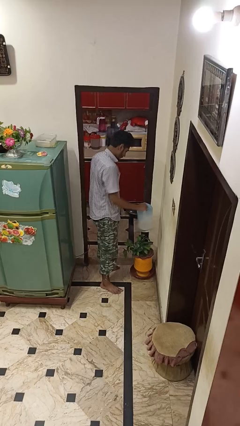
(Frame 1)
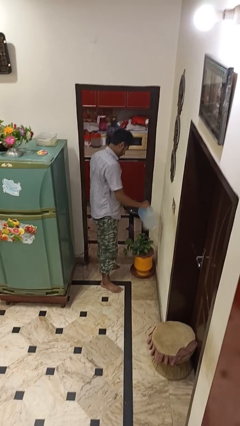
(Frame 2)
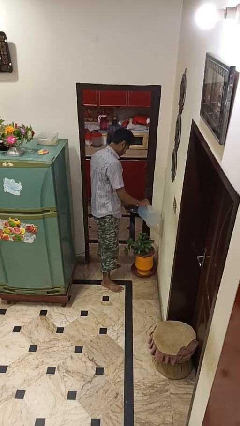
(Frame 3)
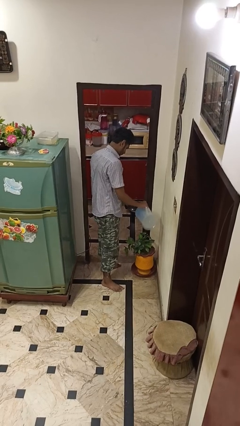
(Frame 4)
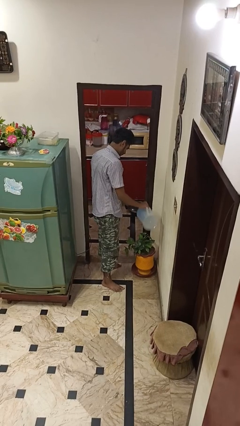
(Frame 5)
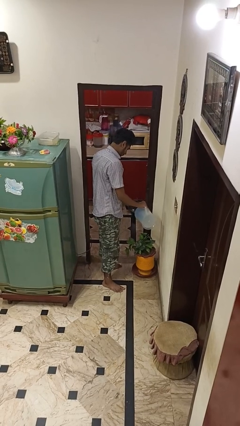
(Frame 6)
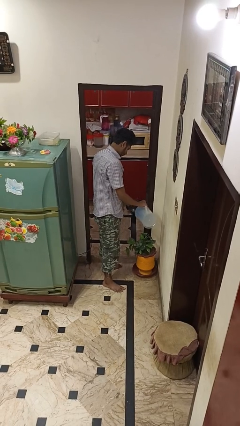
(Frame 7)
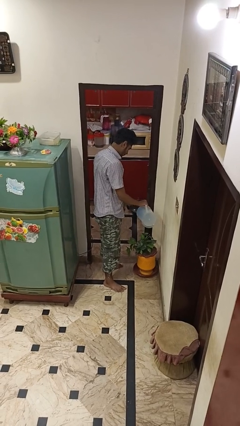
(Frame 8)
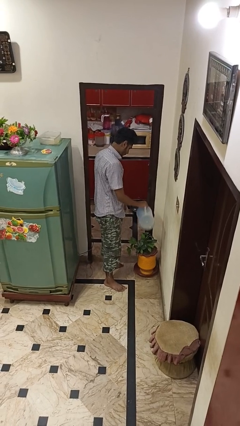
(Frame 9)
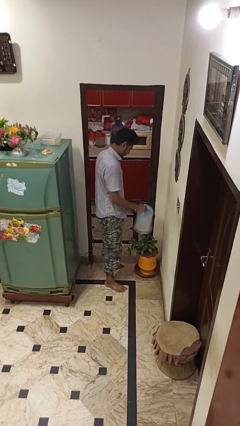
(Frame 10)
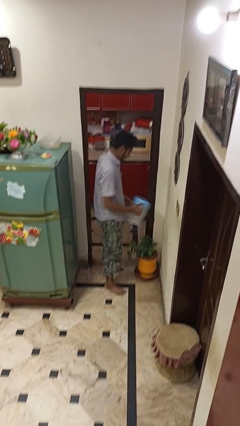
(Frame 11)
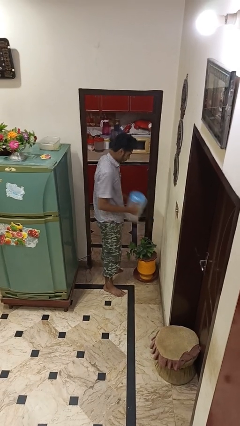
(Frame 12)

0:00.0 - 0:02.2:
person waters houseplant

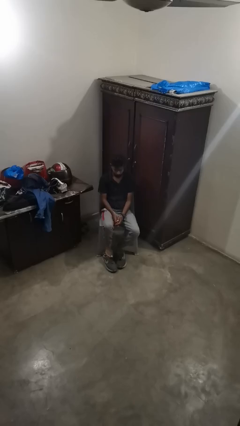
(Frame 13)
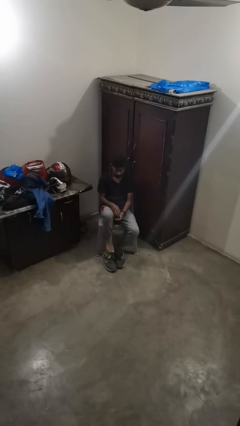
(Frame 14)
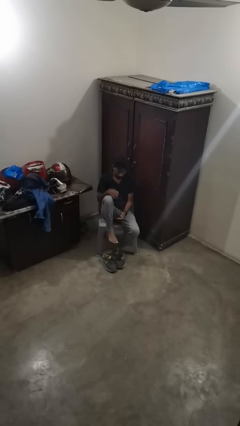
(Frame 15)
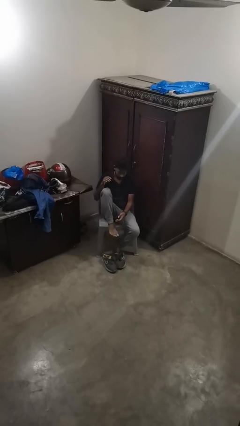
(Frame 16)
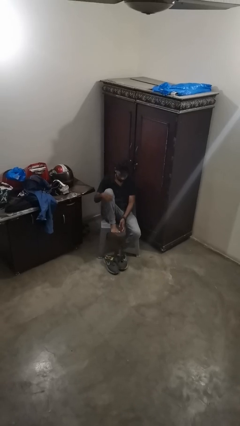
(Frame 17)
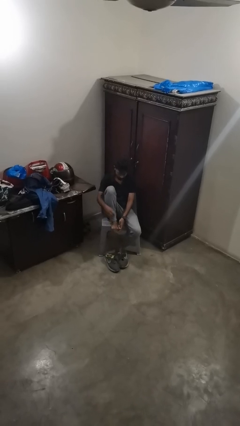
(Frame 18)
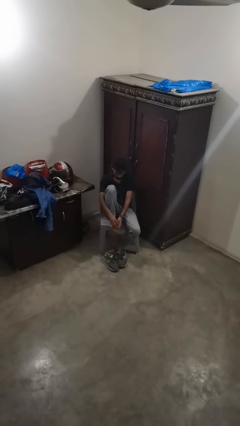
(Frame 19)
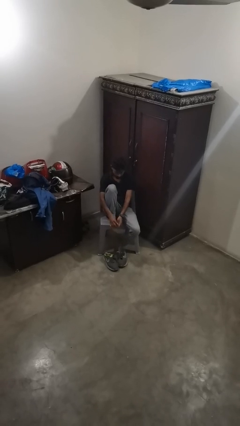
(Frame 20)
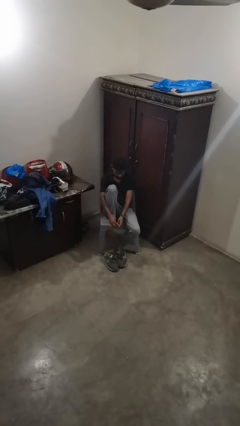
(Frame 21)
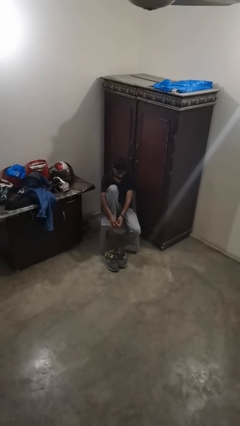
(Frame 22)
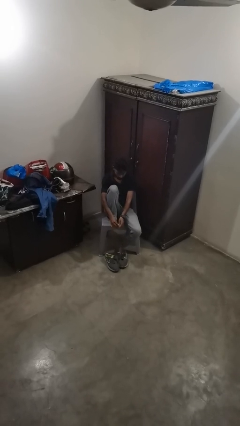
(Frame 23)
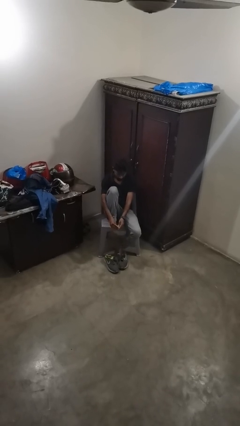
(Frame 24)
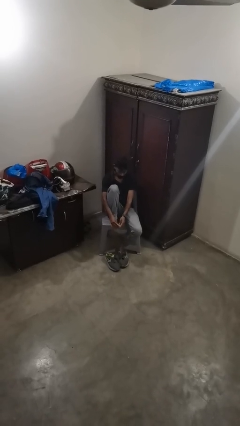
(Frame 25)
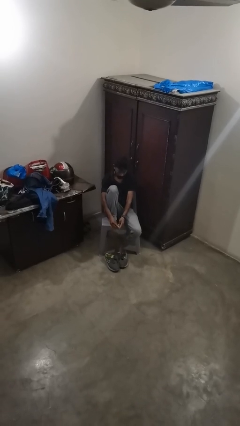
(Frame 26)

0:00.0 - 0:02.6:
person rubs foot

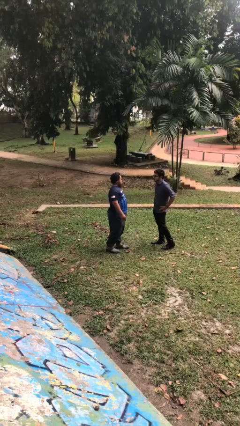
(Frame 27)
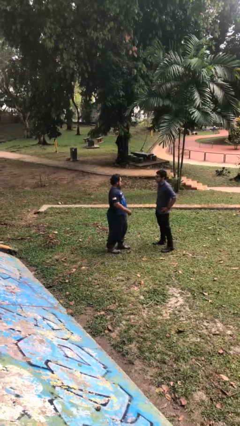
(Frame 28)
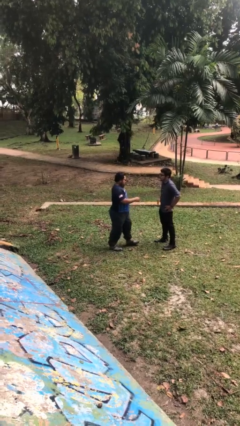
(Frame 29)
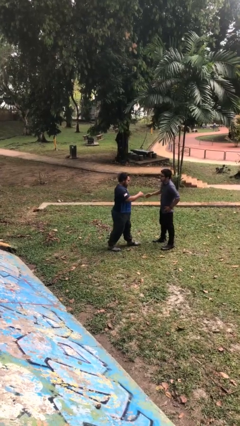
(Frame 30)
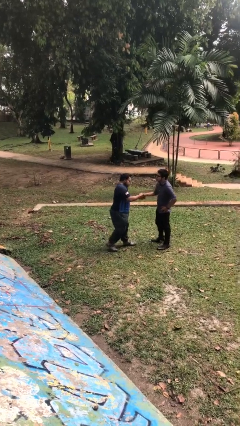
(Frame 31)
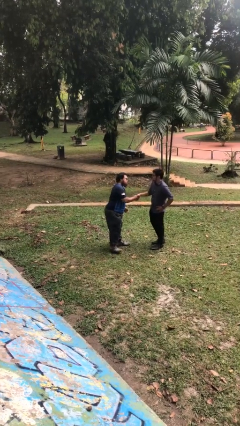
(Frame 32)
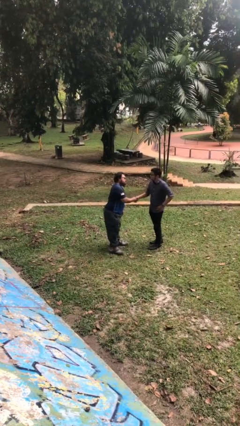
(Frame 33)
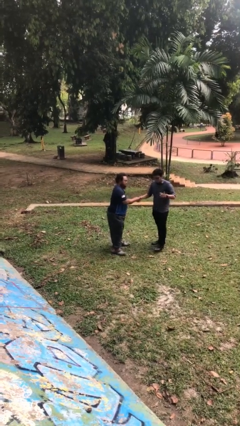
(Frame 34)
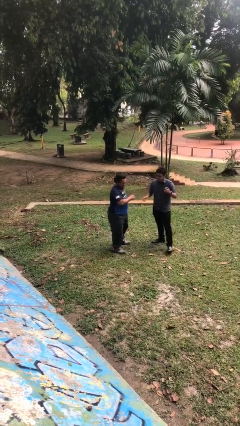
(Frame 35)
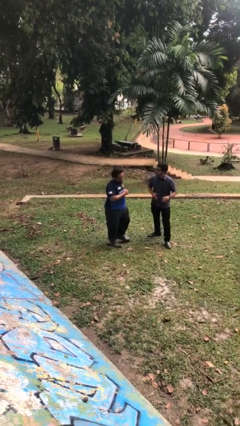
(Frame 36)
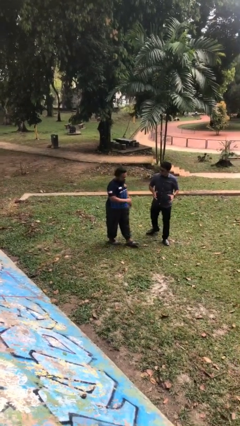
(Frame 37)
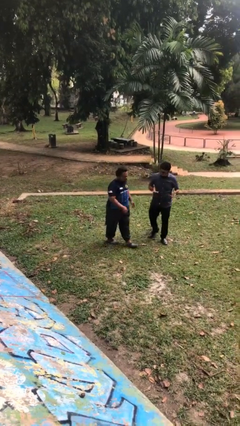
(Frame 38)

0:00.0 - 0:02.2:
person shakes hand

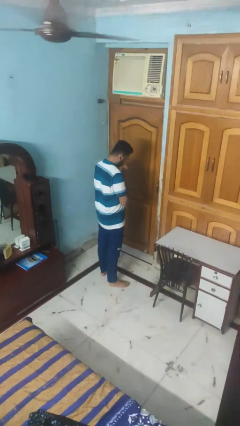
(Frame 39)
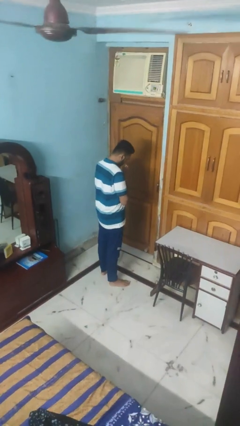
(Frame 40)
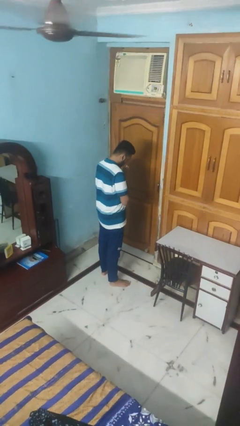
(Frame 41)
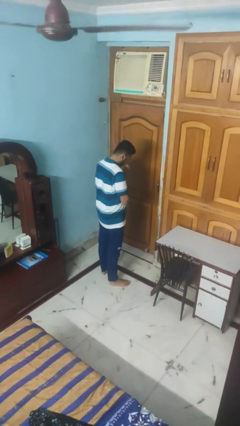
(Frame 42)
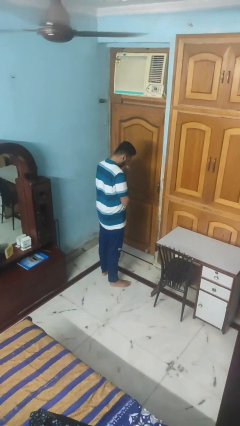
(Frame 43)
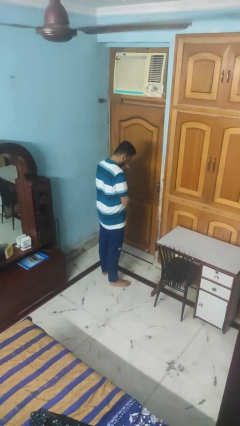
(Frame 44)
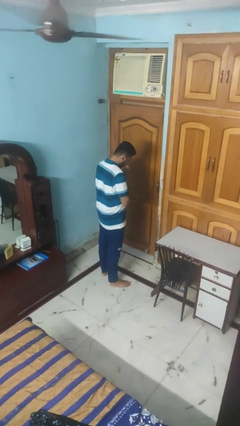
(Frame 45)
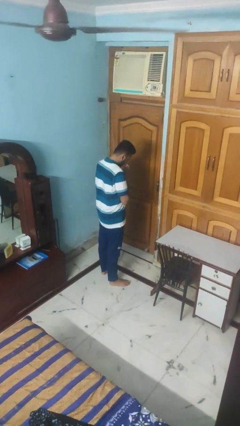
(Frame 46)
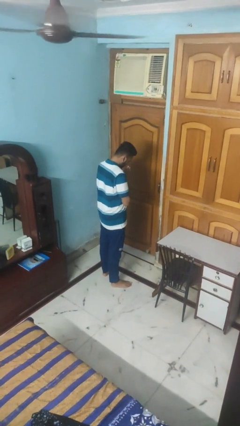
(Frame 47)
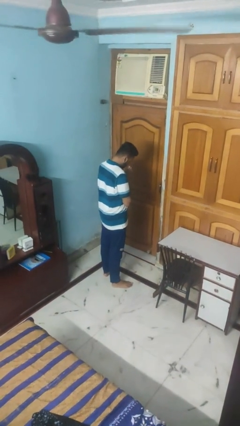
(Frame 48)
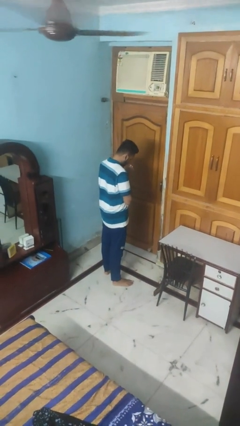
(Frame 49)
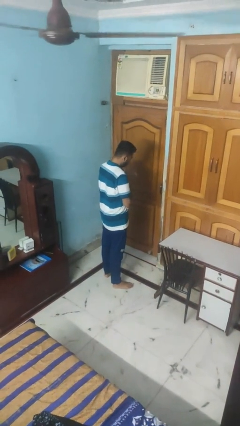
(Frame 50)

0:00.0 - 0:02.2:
person prays

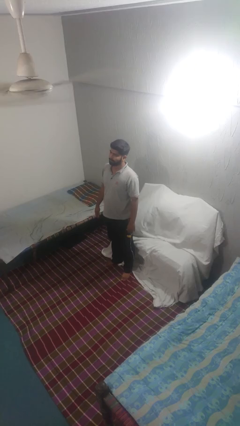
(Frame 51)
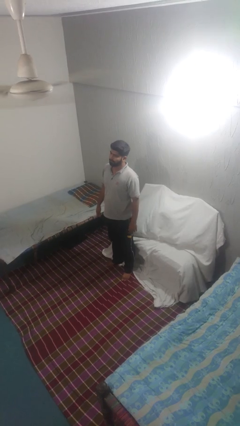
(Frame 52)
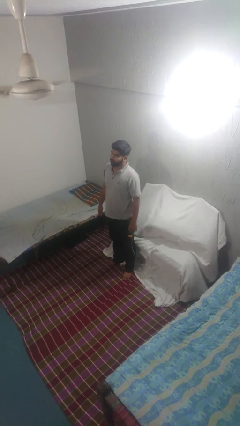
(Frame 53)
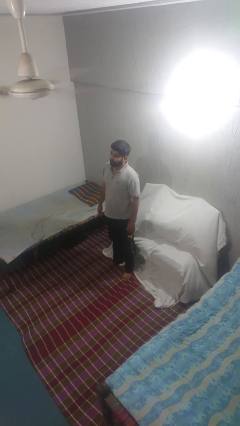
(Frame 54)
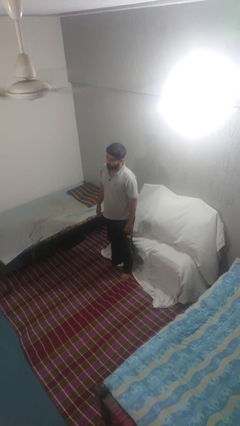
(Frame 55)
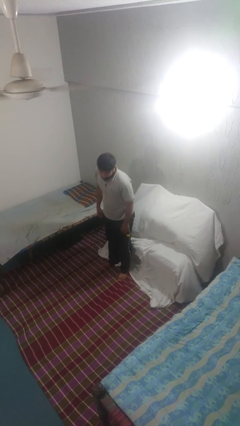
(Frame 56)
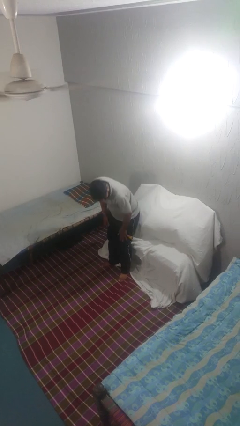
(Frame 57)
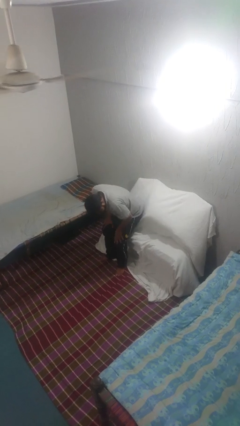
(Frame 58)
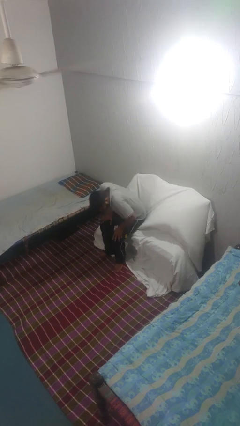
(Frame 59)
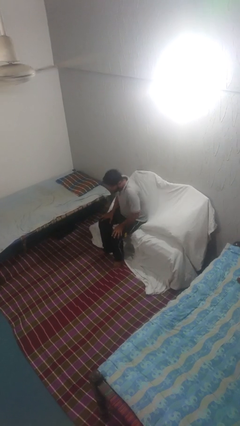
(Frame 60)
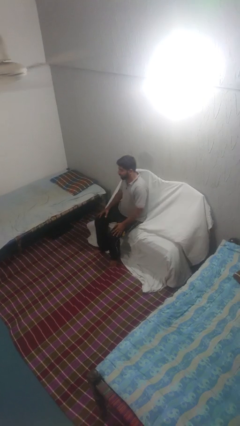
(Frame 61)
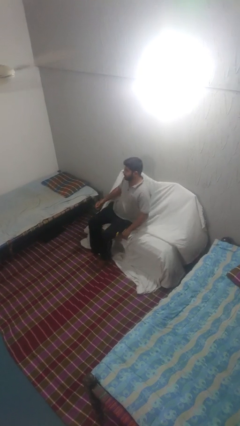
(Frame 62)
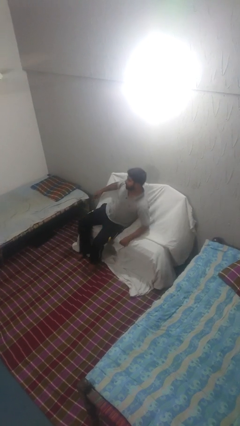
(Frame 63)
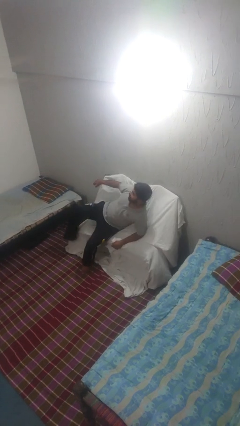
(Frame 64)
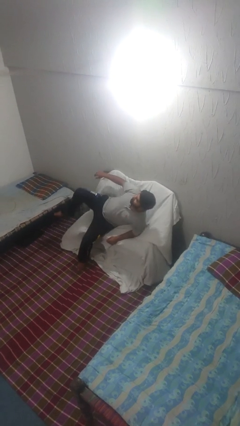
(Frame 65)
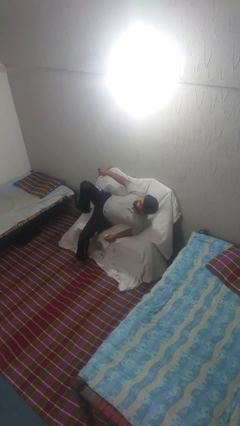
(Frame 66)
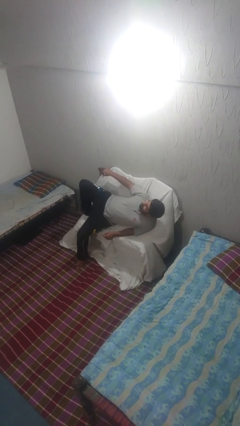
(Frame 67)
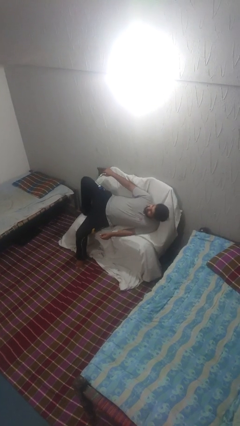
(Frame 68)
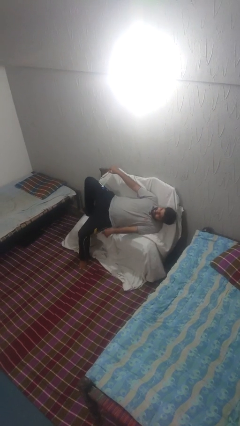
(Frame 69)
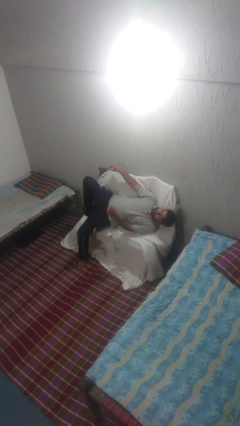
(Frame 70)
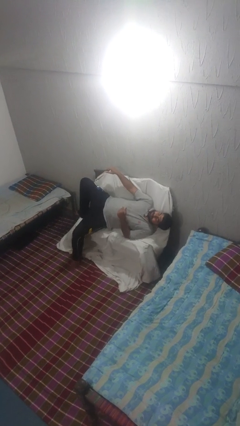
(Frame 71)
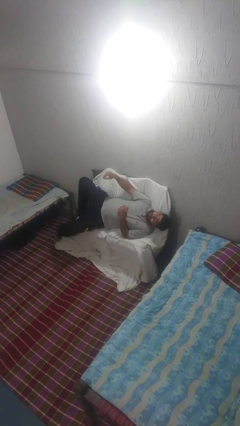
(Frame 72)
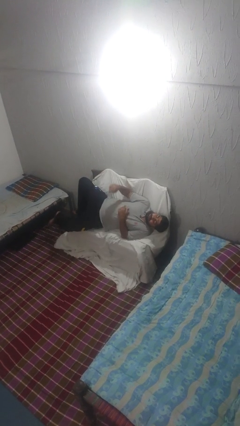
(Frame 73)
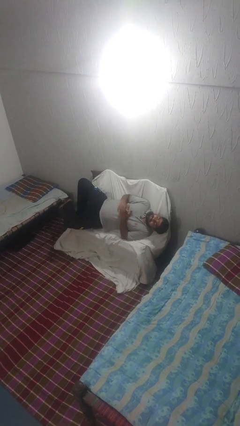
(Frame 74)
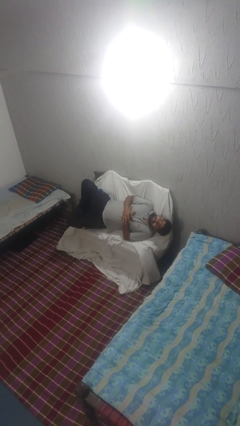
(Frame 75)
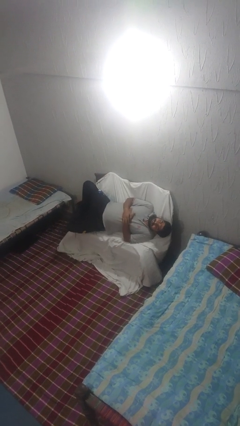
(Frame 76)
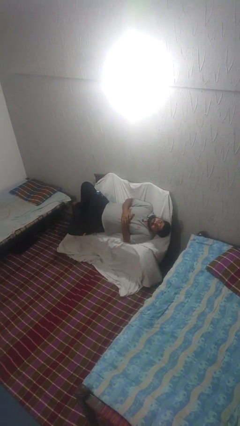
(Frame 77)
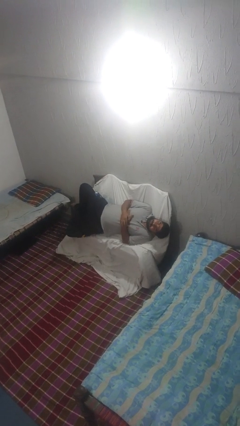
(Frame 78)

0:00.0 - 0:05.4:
person lies down on couch

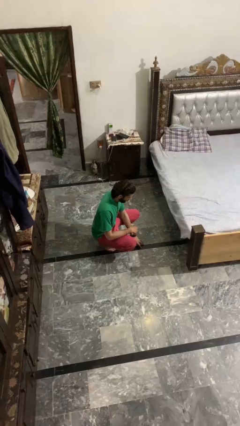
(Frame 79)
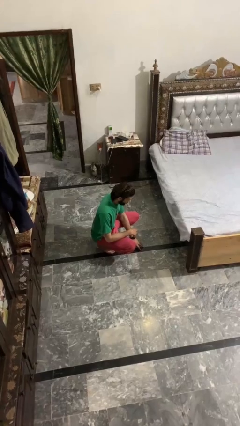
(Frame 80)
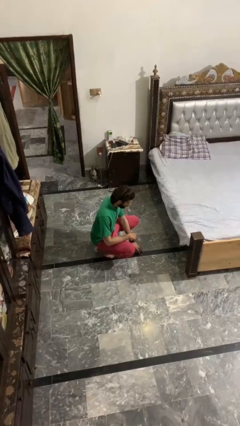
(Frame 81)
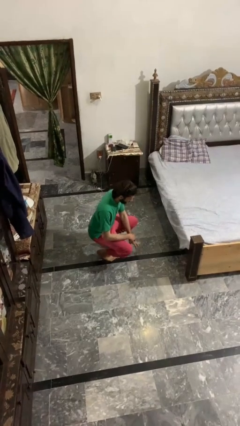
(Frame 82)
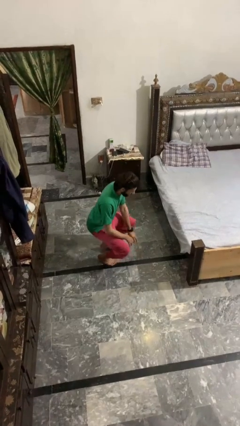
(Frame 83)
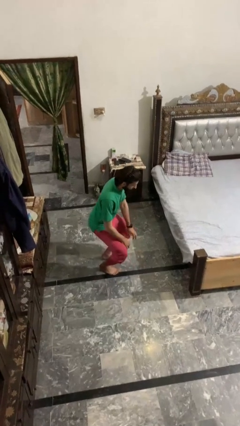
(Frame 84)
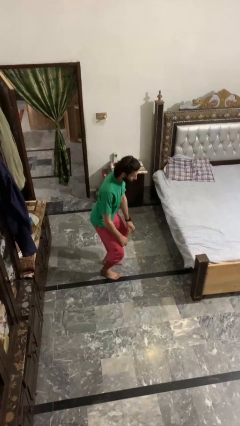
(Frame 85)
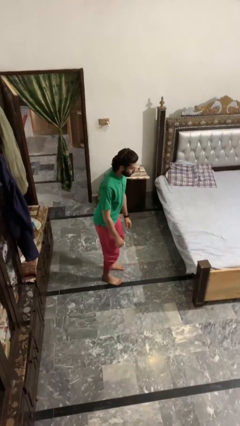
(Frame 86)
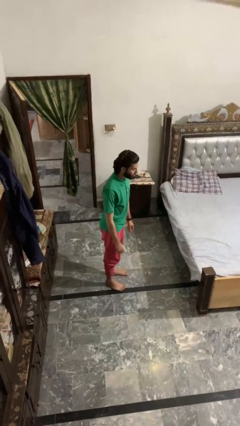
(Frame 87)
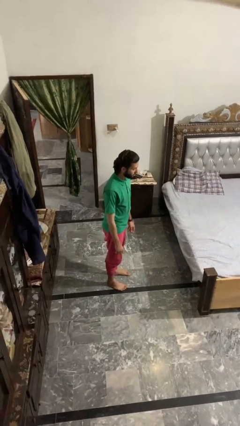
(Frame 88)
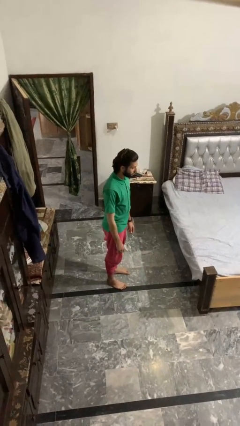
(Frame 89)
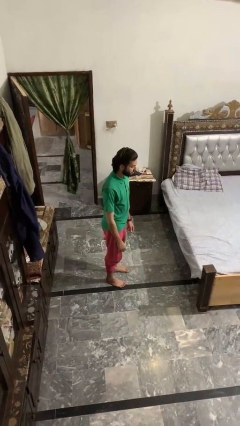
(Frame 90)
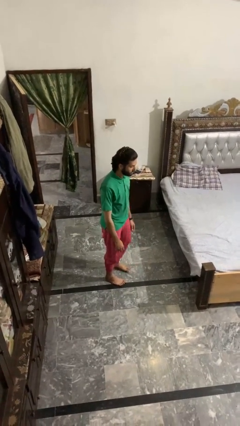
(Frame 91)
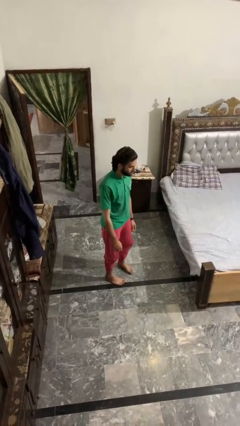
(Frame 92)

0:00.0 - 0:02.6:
person stands up

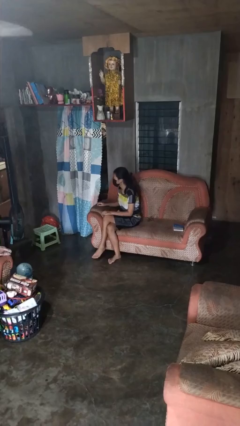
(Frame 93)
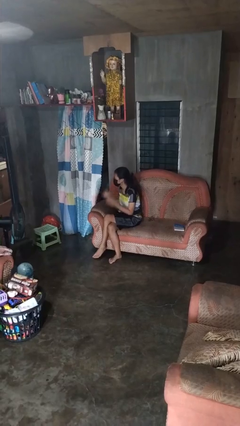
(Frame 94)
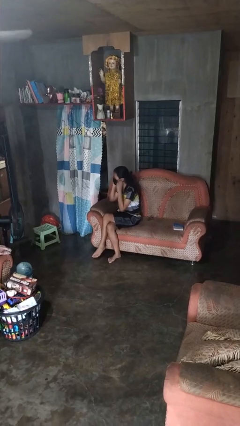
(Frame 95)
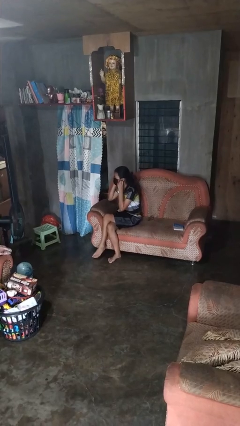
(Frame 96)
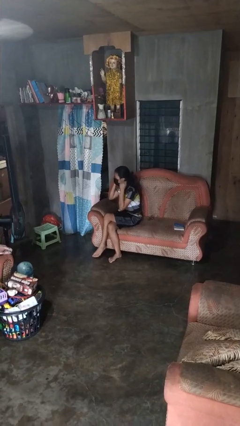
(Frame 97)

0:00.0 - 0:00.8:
person takes off facemask
